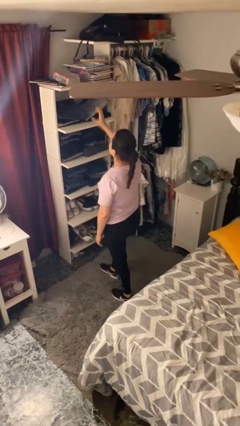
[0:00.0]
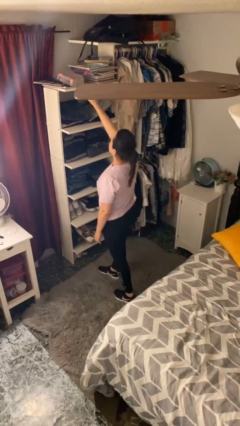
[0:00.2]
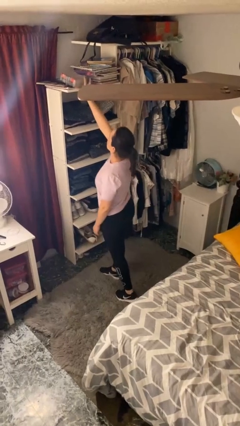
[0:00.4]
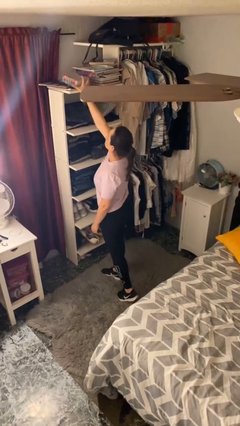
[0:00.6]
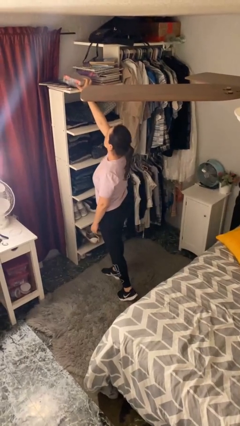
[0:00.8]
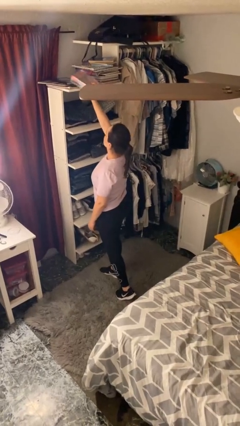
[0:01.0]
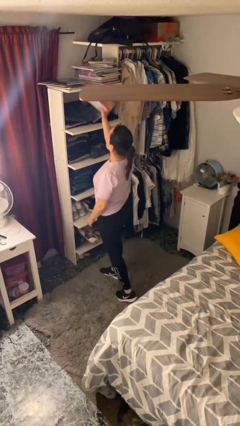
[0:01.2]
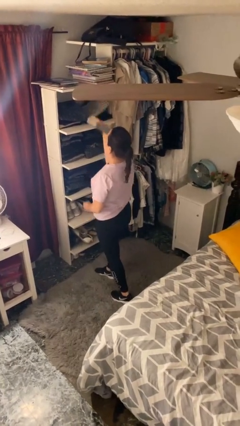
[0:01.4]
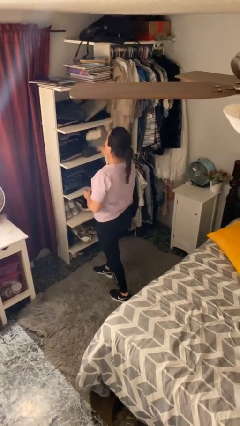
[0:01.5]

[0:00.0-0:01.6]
person picks up object from shelf

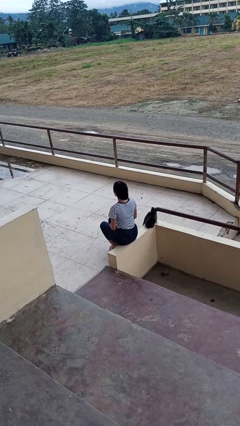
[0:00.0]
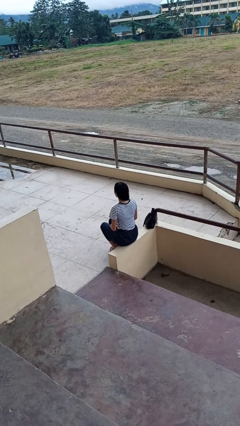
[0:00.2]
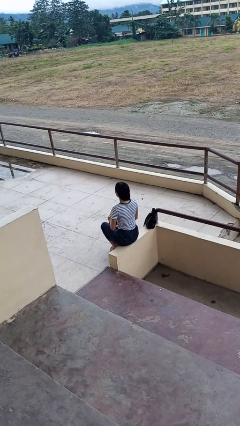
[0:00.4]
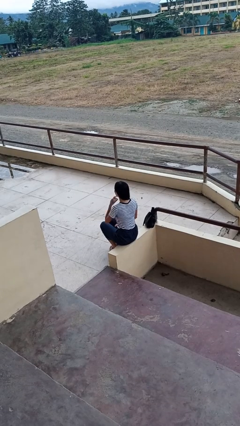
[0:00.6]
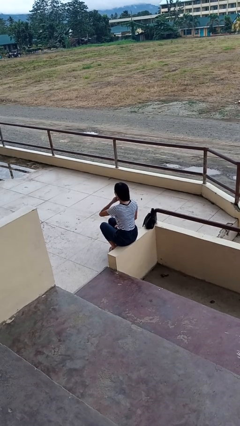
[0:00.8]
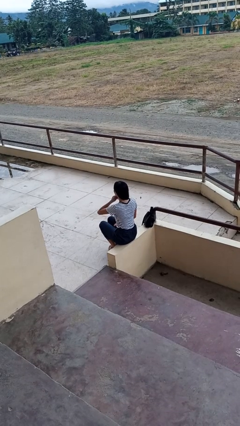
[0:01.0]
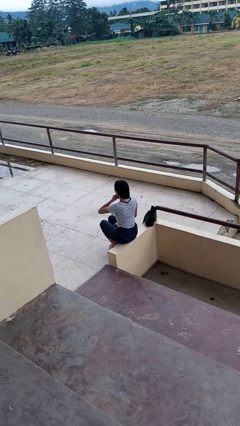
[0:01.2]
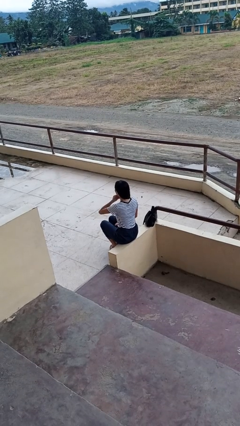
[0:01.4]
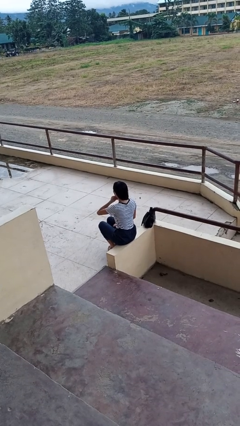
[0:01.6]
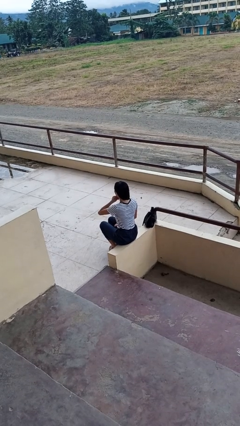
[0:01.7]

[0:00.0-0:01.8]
person strokes chin

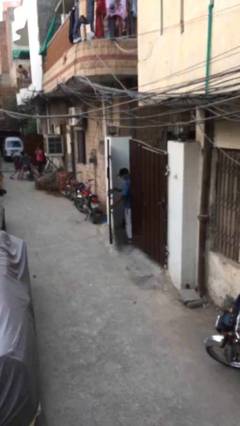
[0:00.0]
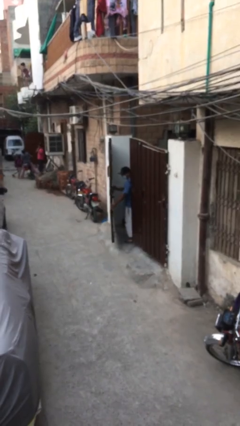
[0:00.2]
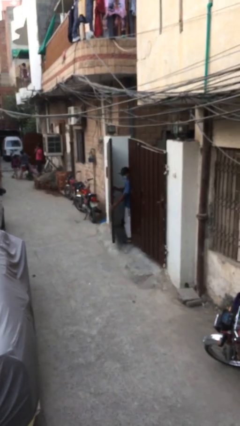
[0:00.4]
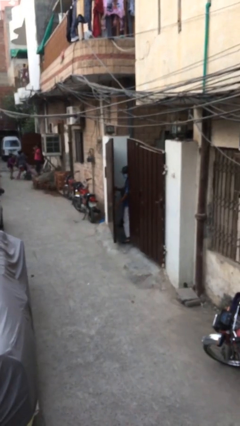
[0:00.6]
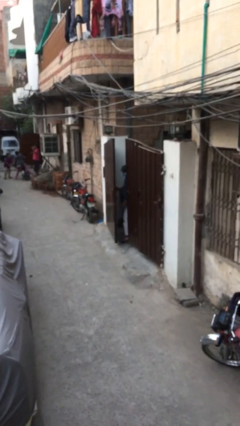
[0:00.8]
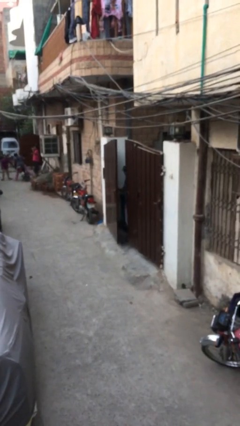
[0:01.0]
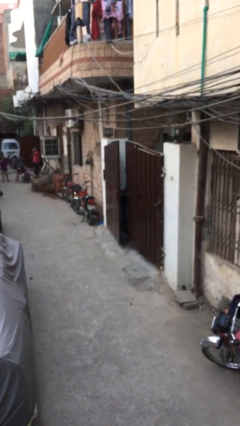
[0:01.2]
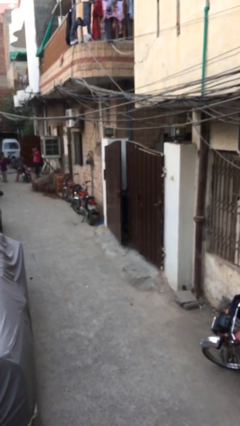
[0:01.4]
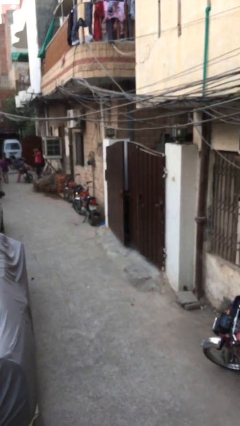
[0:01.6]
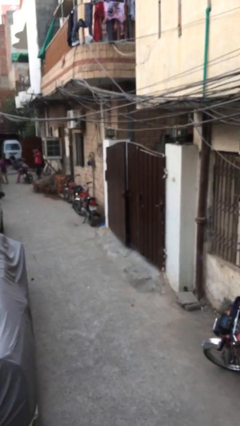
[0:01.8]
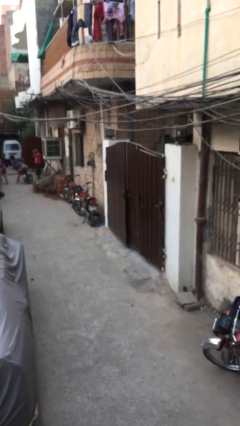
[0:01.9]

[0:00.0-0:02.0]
person closes facility door

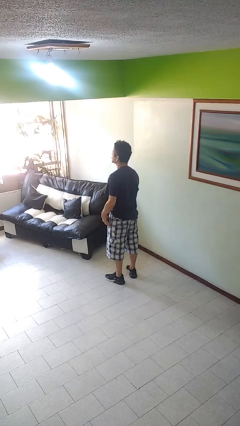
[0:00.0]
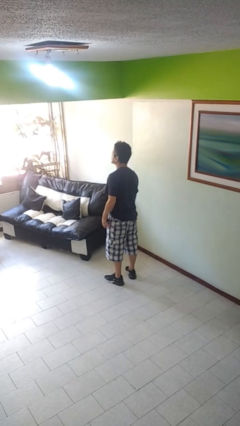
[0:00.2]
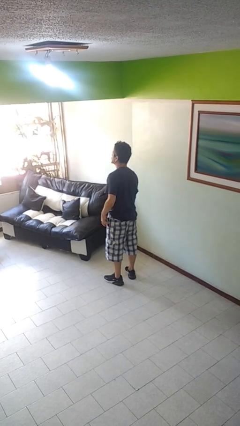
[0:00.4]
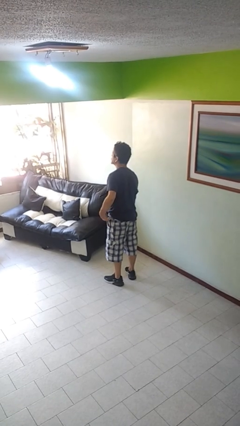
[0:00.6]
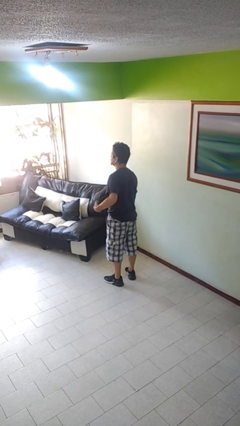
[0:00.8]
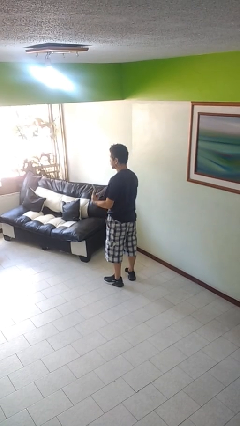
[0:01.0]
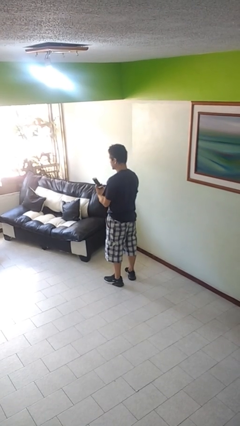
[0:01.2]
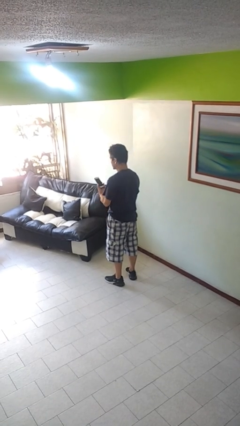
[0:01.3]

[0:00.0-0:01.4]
person takes phone from pocket

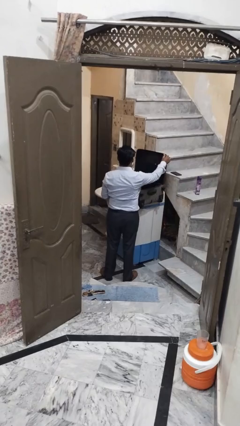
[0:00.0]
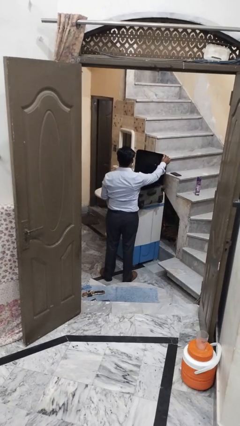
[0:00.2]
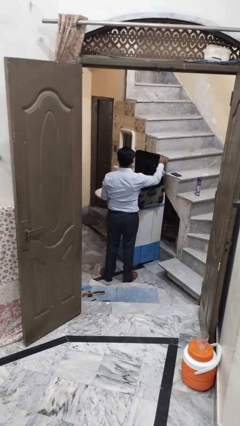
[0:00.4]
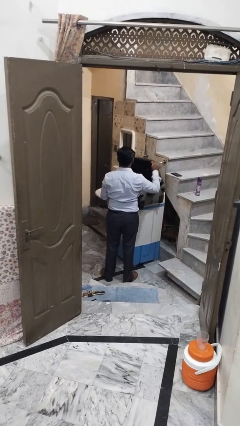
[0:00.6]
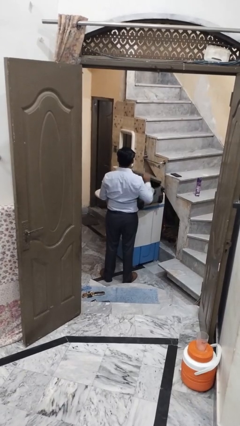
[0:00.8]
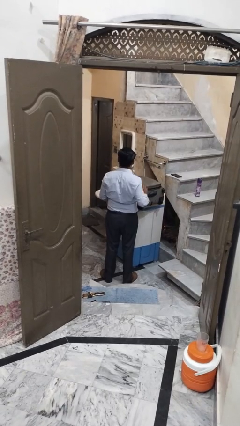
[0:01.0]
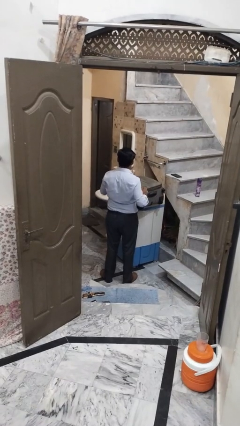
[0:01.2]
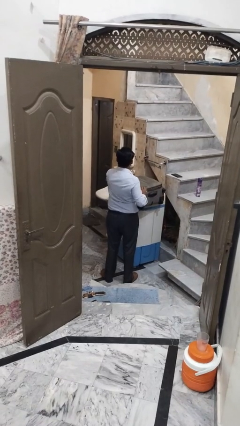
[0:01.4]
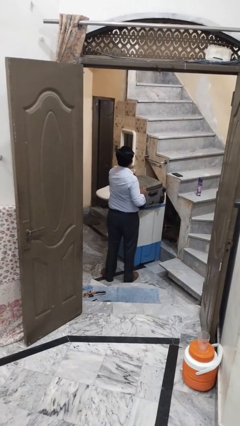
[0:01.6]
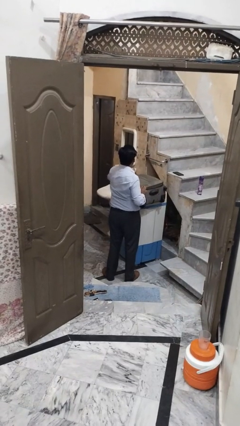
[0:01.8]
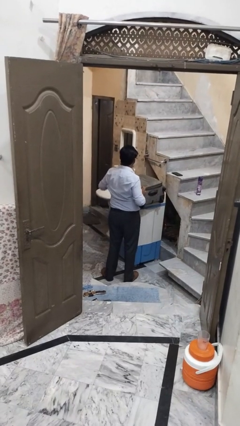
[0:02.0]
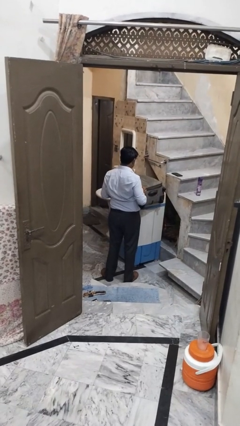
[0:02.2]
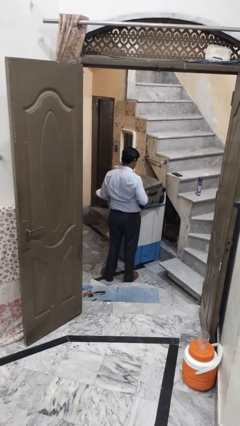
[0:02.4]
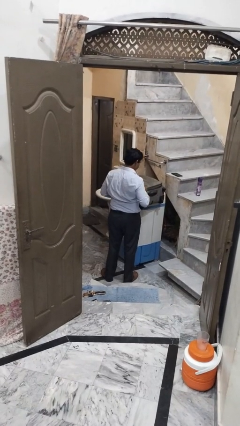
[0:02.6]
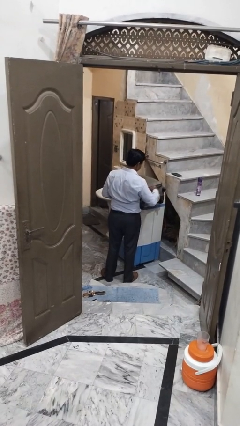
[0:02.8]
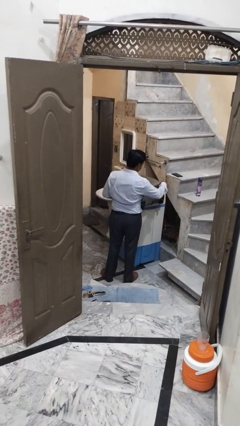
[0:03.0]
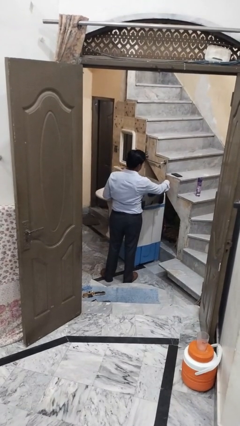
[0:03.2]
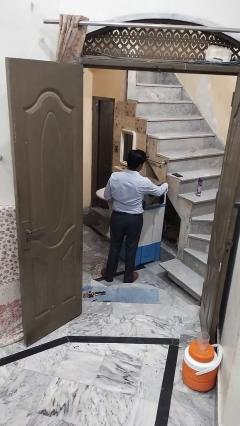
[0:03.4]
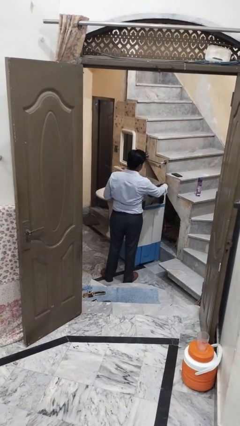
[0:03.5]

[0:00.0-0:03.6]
person closes suitcase

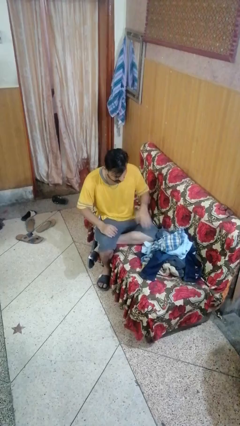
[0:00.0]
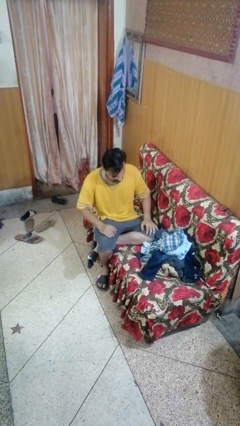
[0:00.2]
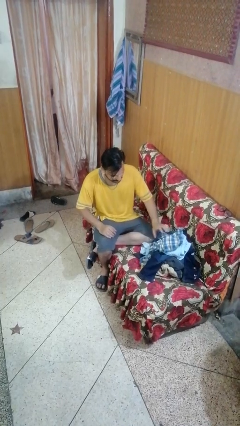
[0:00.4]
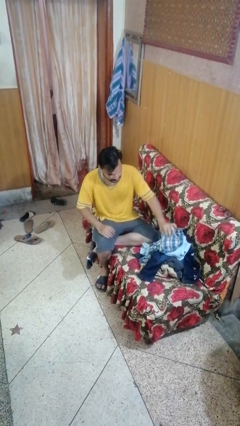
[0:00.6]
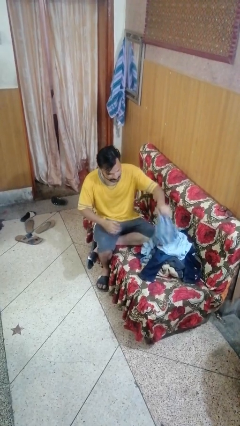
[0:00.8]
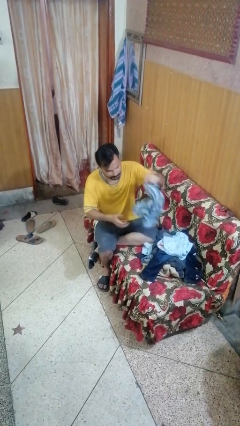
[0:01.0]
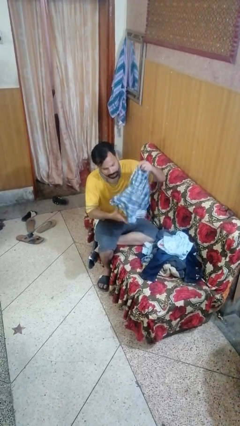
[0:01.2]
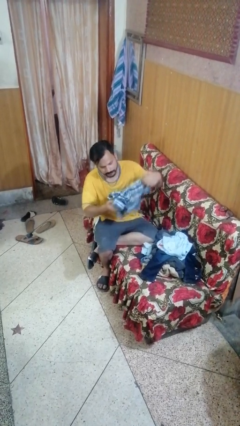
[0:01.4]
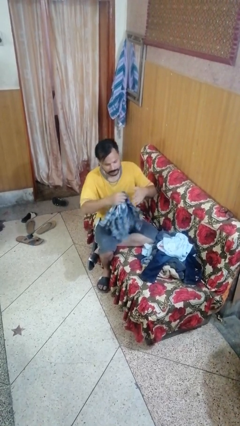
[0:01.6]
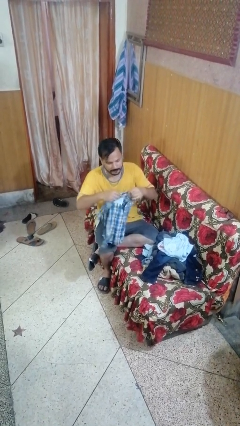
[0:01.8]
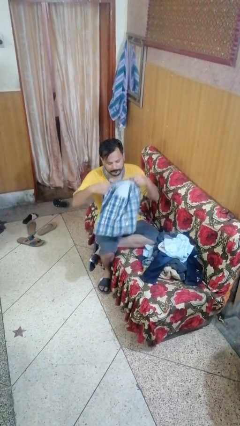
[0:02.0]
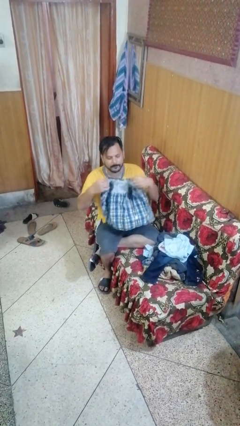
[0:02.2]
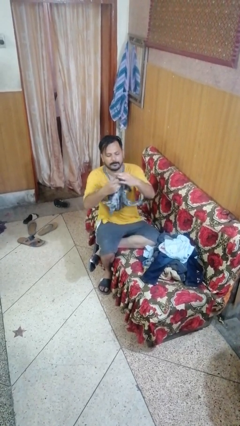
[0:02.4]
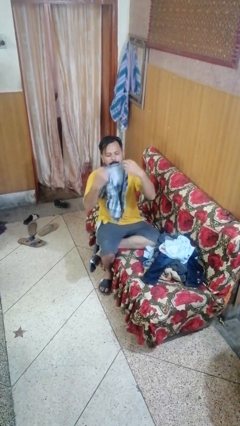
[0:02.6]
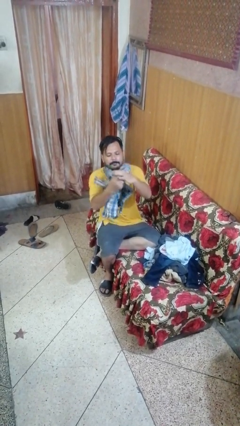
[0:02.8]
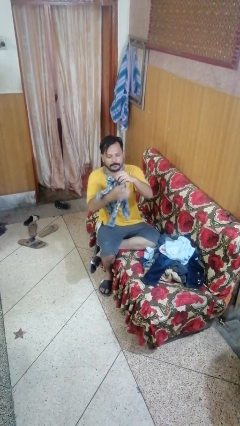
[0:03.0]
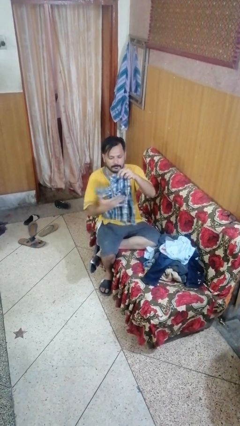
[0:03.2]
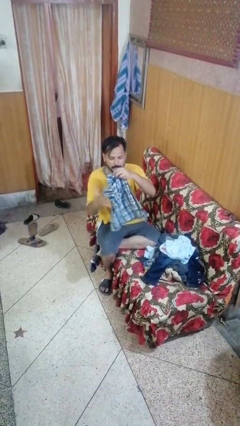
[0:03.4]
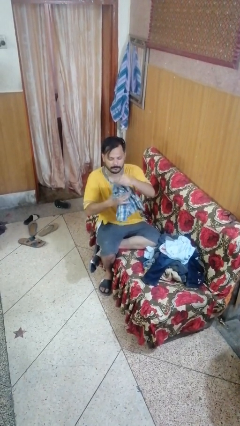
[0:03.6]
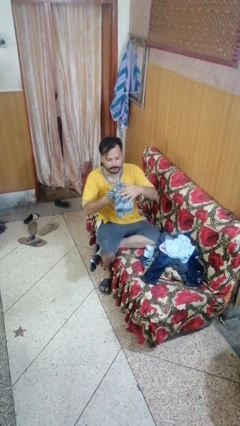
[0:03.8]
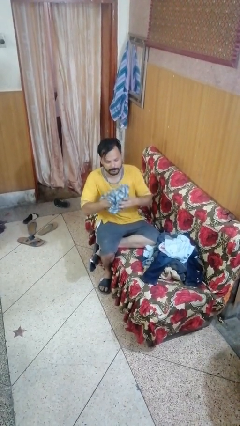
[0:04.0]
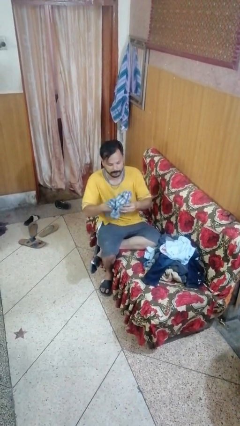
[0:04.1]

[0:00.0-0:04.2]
person folds shirt

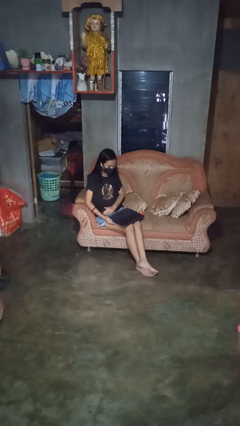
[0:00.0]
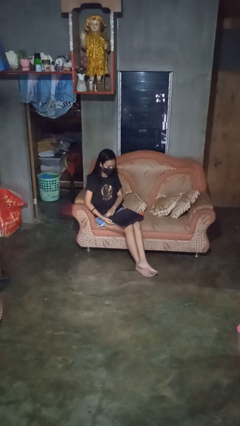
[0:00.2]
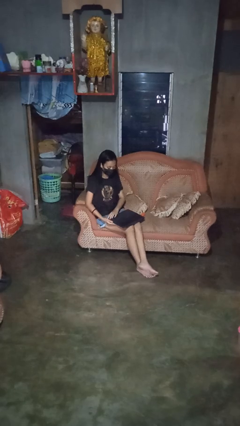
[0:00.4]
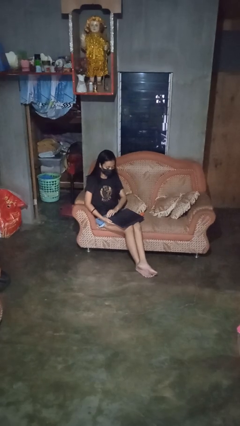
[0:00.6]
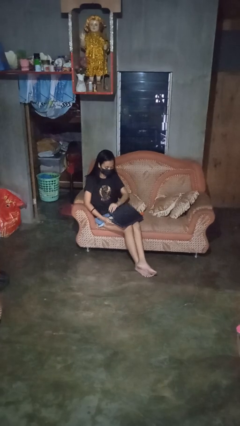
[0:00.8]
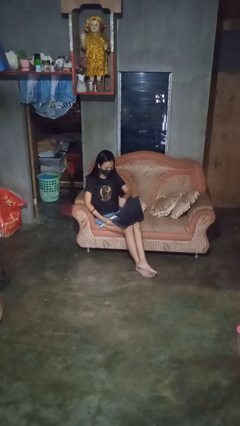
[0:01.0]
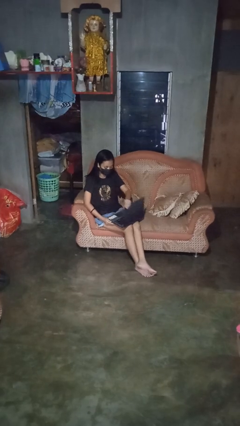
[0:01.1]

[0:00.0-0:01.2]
person opens laptop

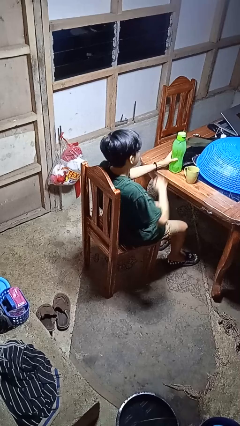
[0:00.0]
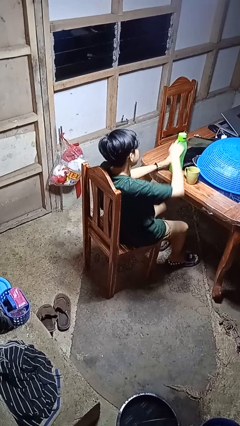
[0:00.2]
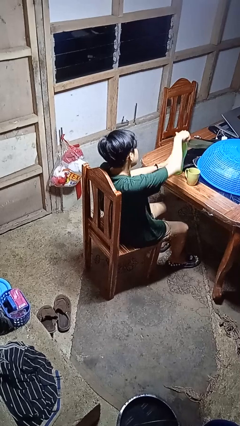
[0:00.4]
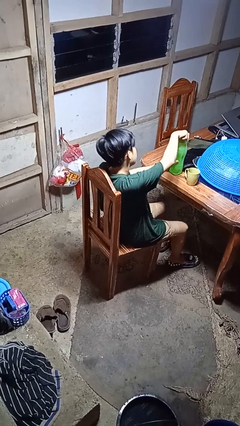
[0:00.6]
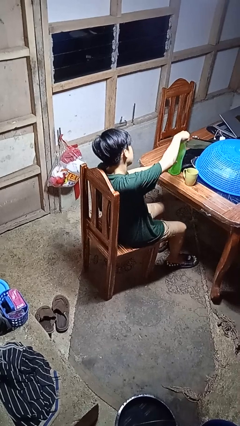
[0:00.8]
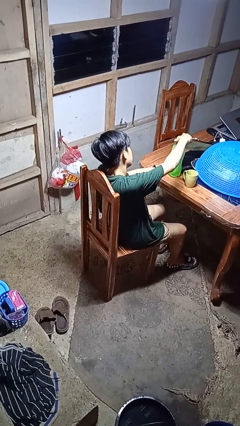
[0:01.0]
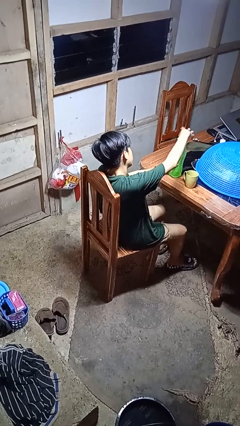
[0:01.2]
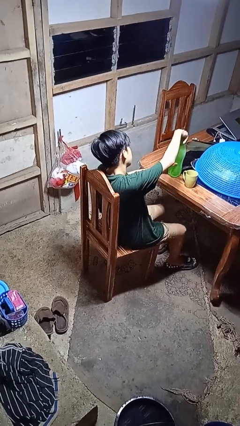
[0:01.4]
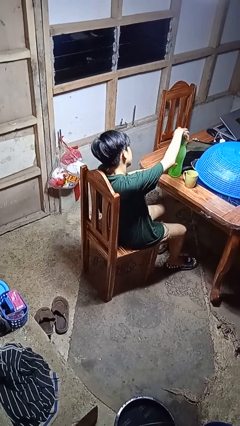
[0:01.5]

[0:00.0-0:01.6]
person unscrews lid from bottle
